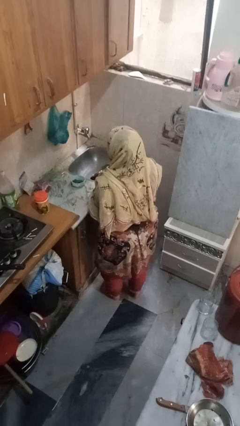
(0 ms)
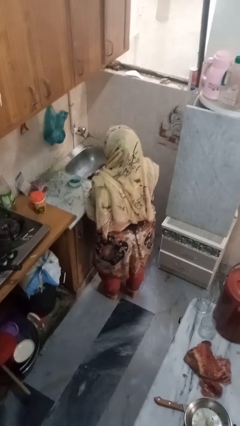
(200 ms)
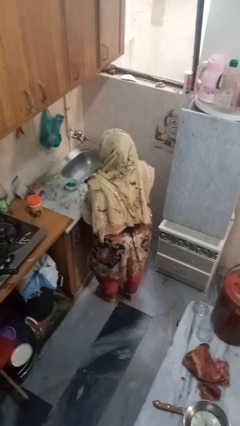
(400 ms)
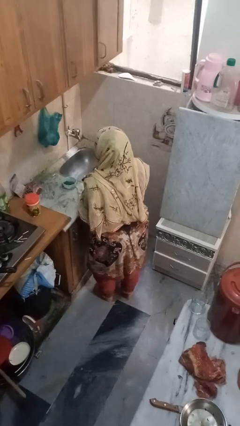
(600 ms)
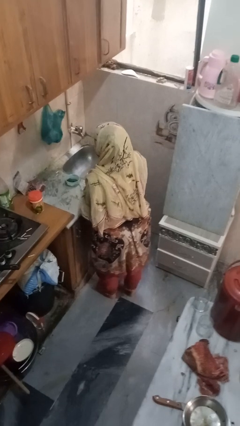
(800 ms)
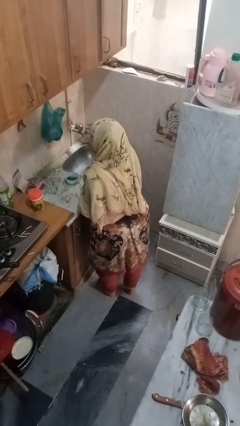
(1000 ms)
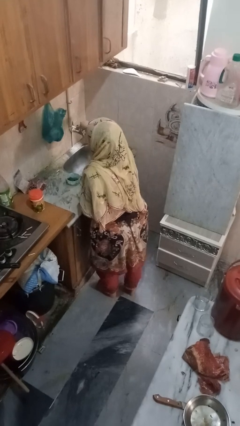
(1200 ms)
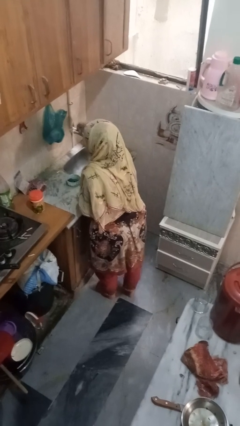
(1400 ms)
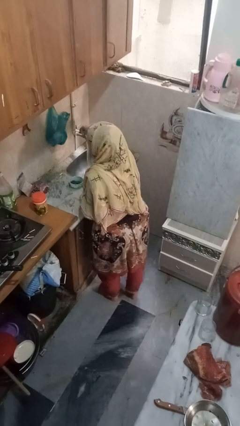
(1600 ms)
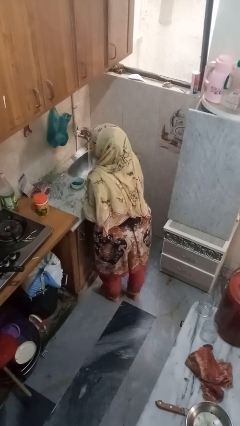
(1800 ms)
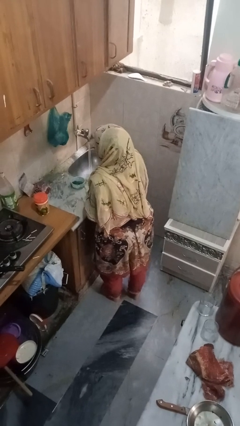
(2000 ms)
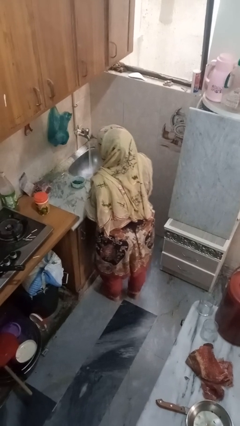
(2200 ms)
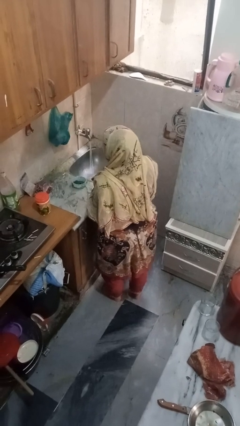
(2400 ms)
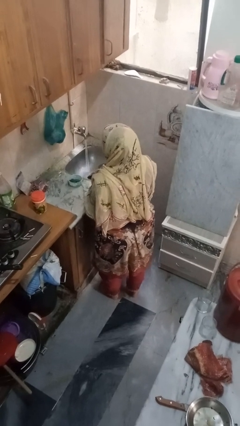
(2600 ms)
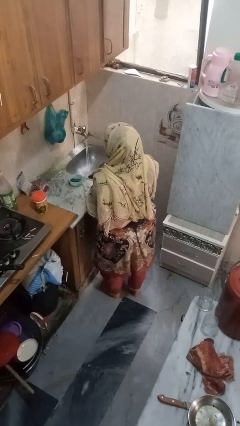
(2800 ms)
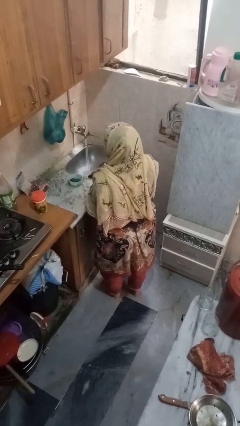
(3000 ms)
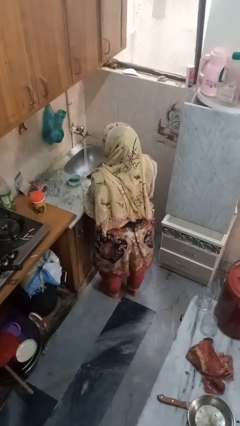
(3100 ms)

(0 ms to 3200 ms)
person turns on faucet

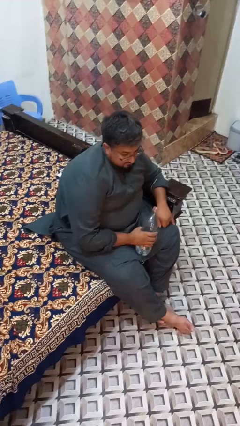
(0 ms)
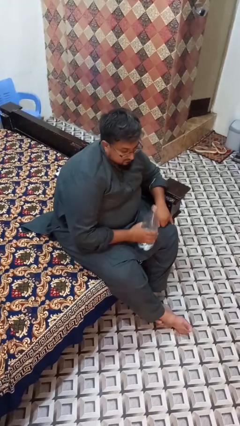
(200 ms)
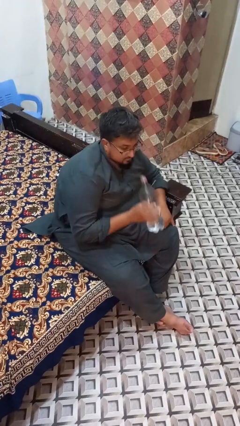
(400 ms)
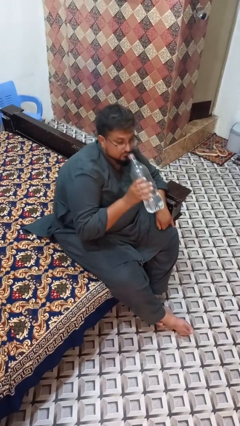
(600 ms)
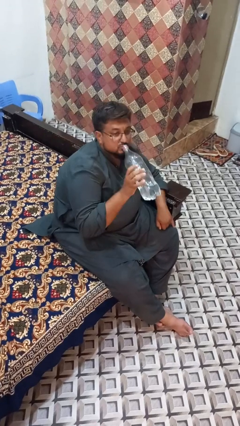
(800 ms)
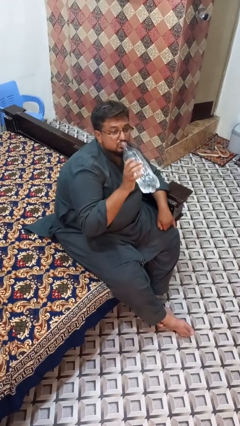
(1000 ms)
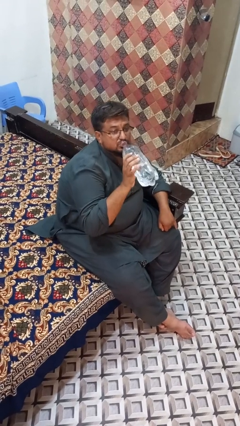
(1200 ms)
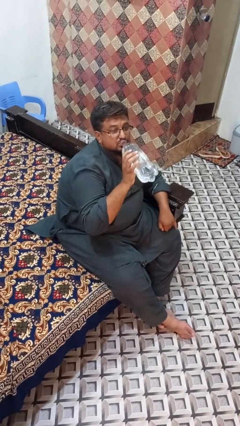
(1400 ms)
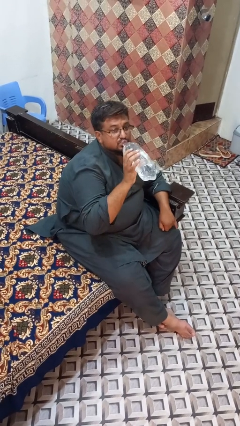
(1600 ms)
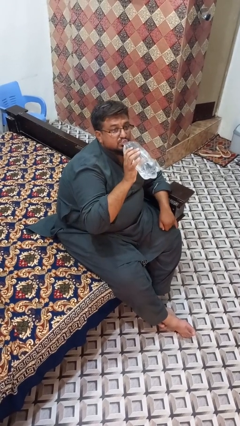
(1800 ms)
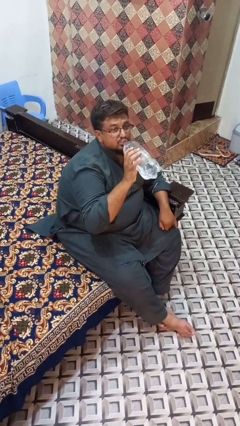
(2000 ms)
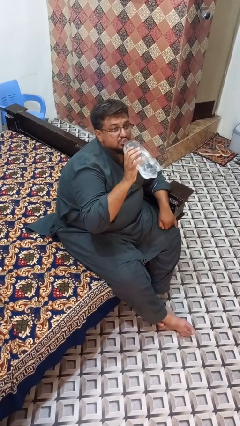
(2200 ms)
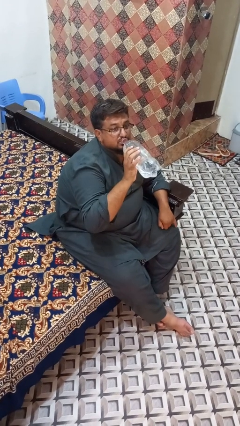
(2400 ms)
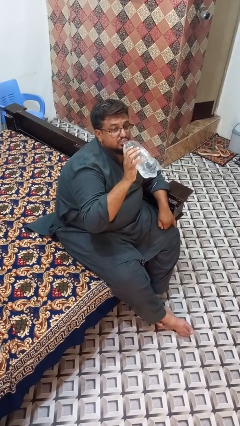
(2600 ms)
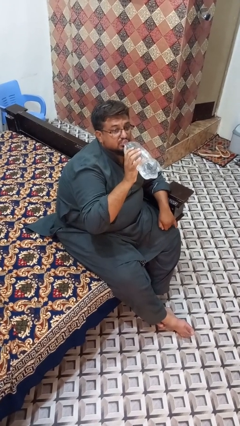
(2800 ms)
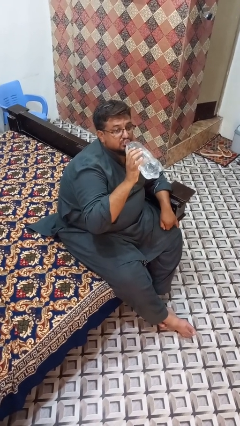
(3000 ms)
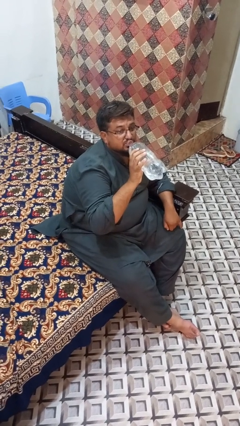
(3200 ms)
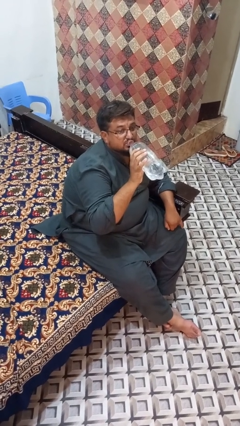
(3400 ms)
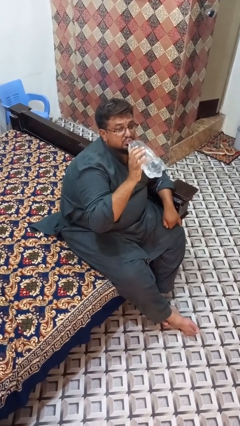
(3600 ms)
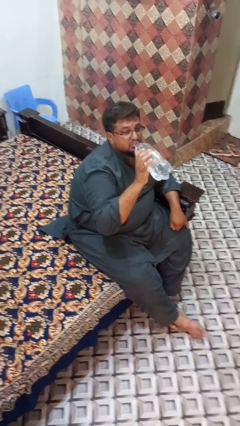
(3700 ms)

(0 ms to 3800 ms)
person drinks from bottle

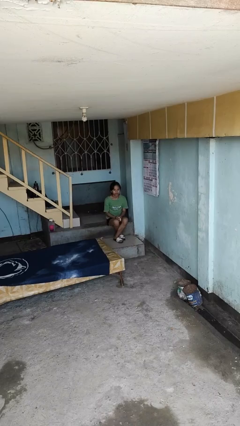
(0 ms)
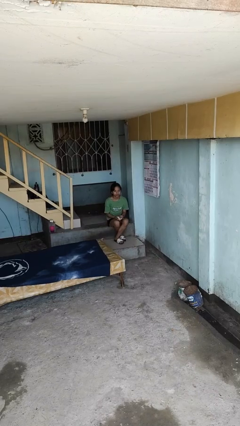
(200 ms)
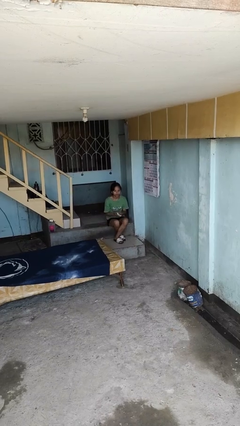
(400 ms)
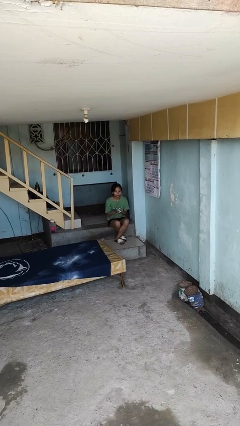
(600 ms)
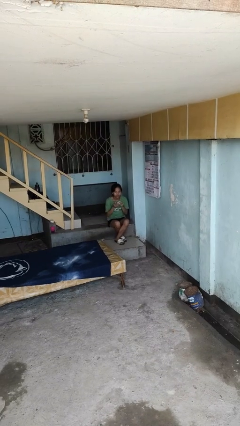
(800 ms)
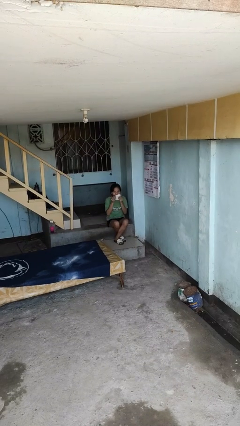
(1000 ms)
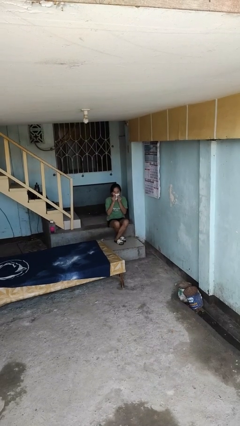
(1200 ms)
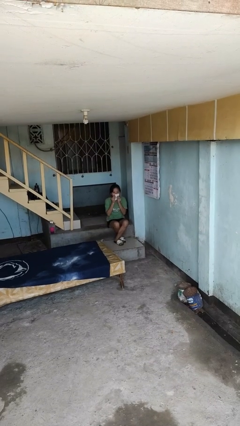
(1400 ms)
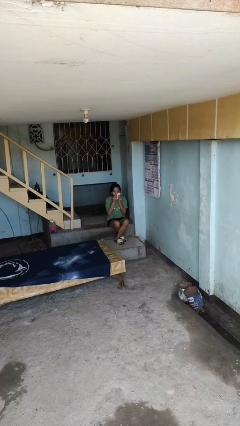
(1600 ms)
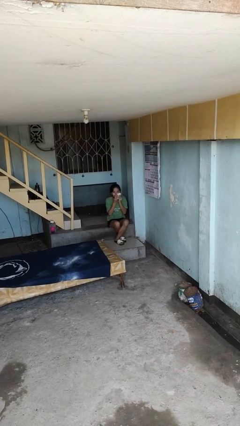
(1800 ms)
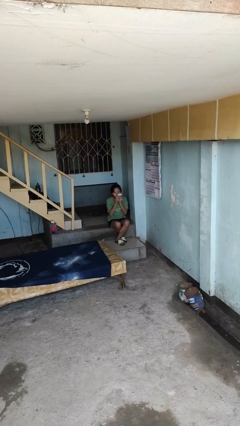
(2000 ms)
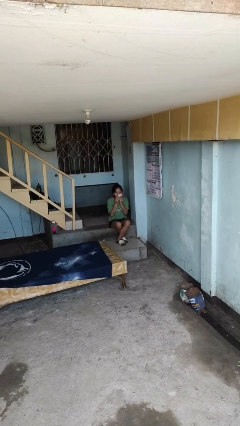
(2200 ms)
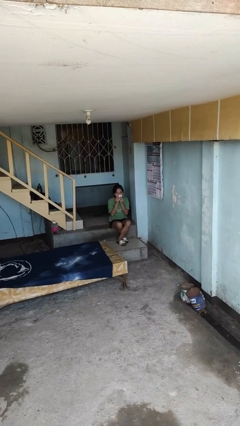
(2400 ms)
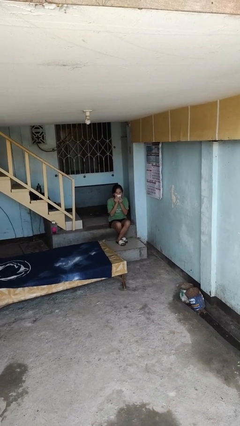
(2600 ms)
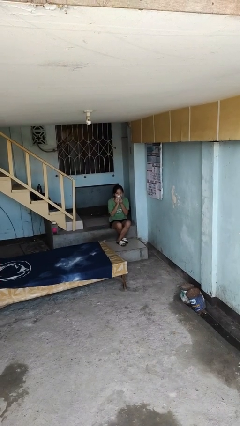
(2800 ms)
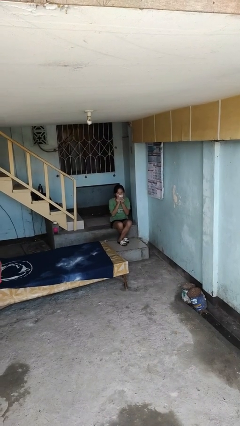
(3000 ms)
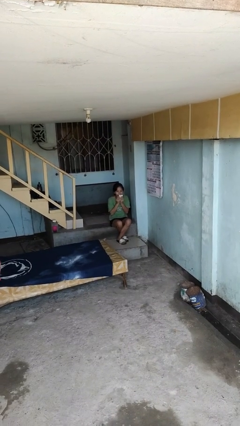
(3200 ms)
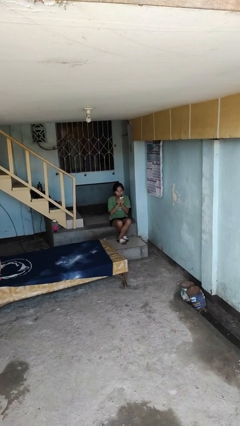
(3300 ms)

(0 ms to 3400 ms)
person wipes mouth with napkin

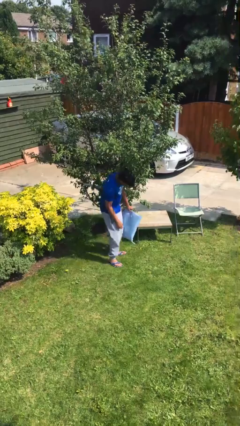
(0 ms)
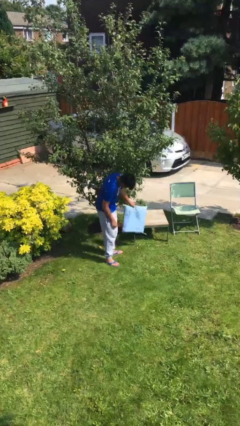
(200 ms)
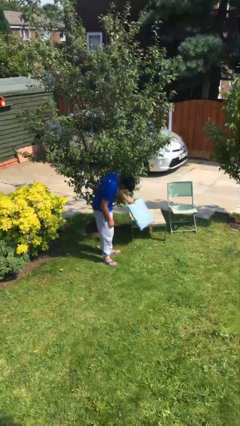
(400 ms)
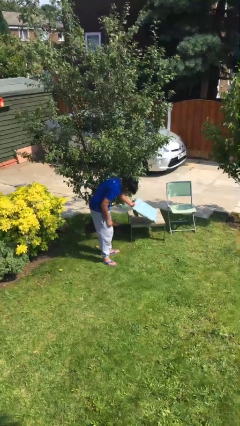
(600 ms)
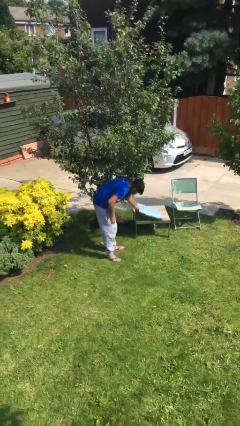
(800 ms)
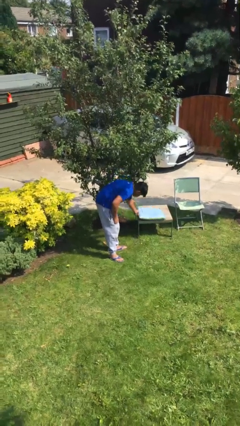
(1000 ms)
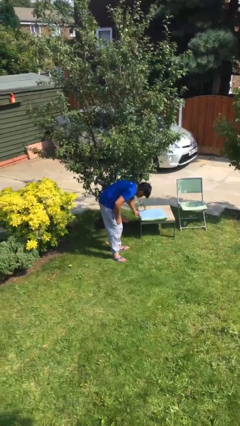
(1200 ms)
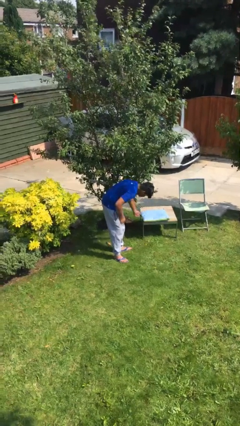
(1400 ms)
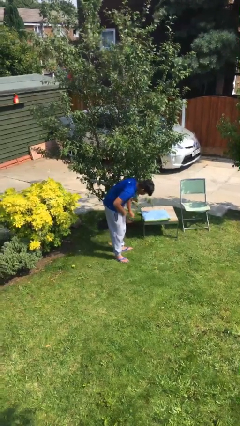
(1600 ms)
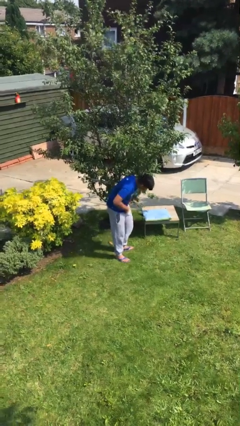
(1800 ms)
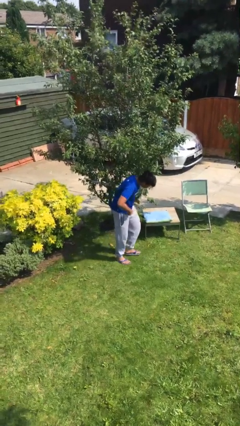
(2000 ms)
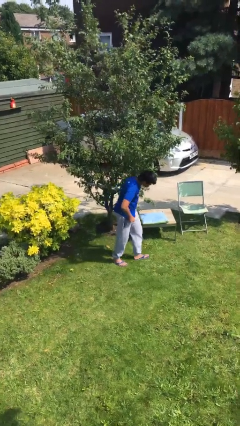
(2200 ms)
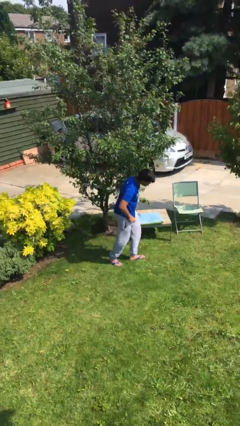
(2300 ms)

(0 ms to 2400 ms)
person puts down object on table

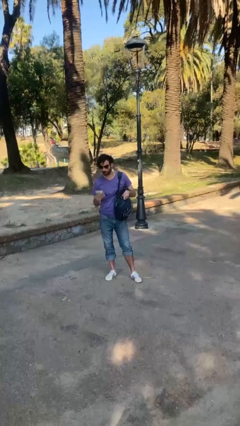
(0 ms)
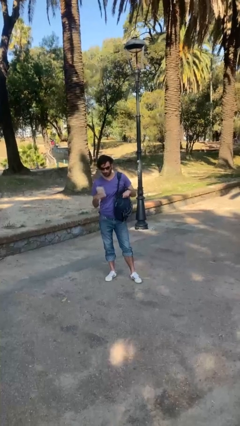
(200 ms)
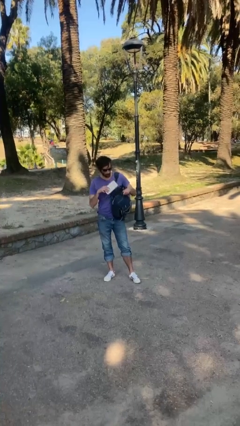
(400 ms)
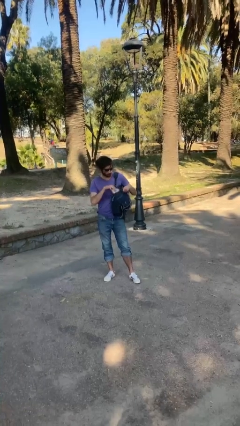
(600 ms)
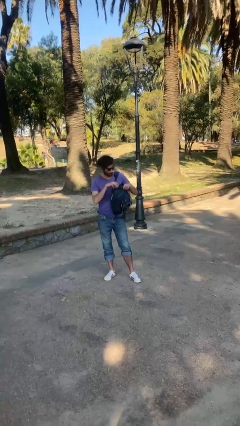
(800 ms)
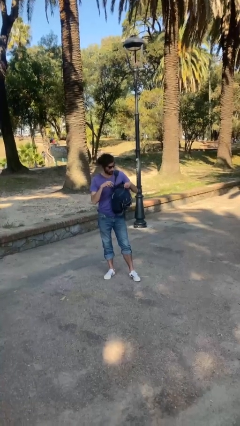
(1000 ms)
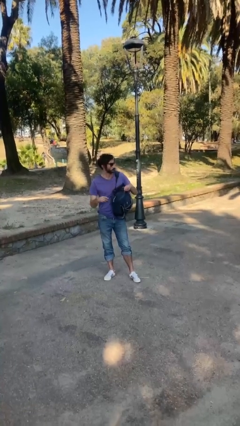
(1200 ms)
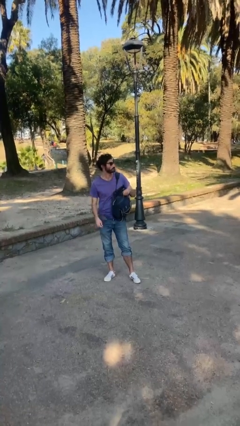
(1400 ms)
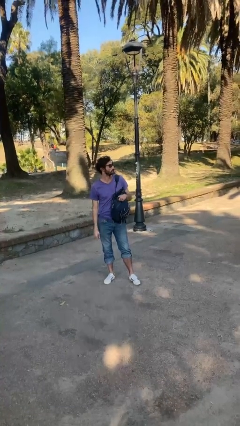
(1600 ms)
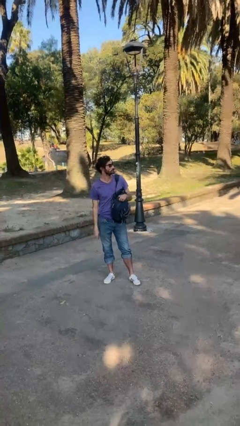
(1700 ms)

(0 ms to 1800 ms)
person puts object into backpack

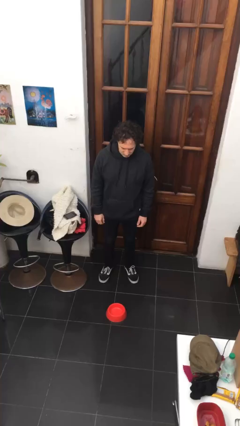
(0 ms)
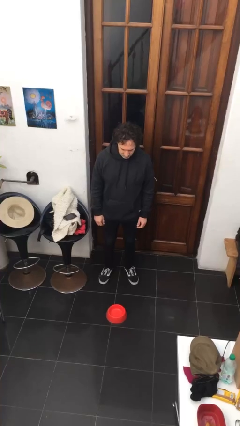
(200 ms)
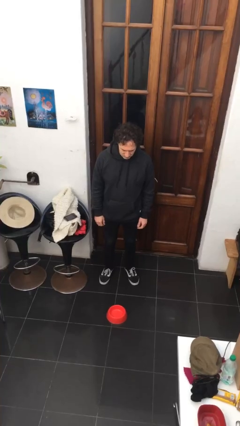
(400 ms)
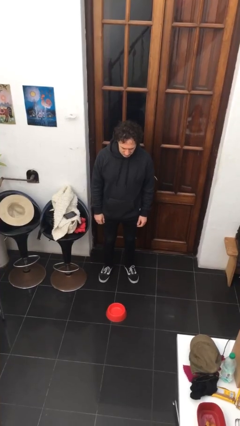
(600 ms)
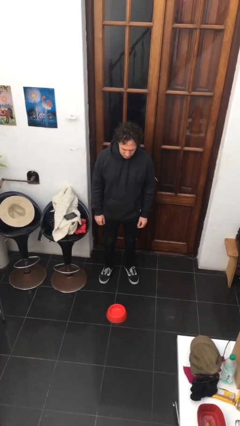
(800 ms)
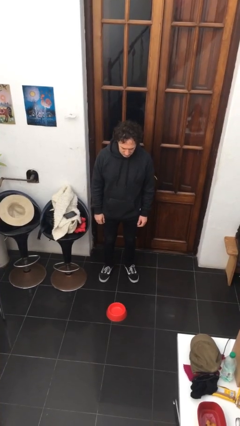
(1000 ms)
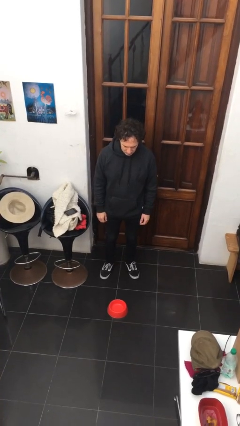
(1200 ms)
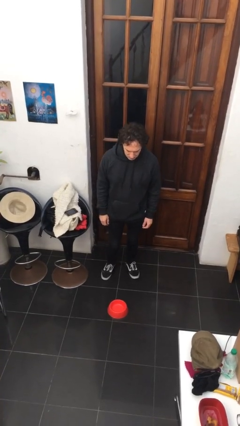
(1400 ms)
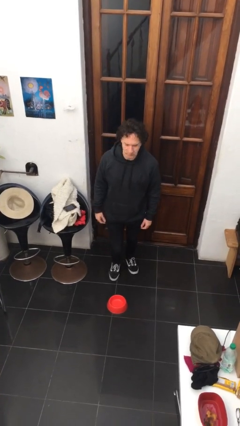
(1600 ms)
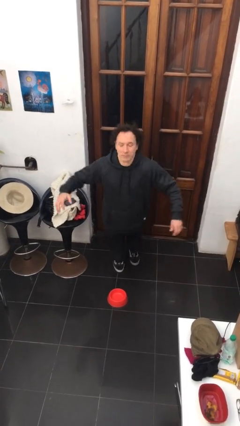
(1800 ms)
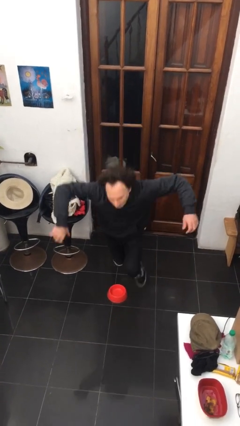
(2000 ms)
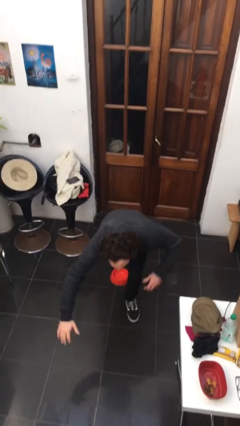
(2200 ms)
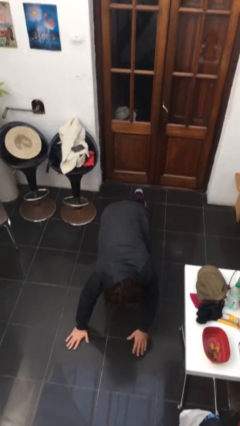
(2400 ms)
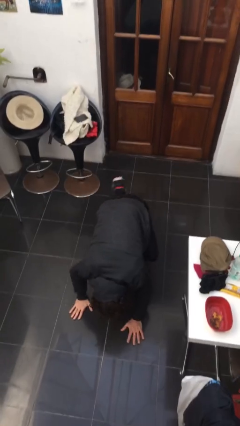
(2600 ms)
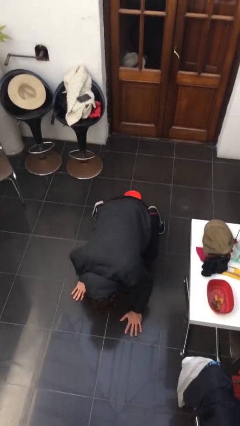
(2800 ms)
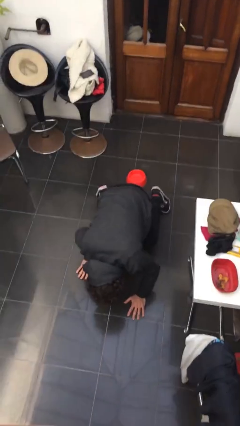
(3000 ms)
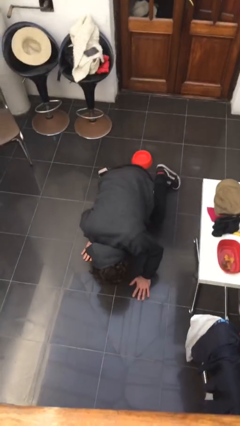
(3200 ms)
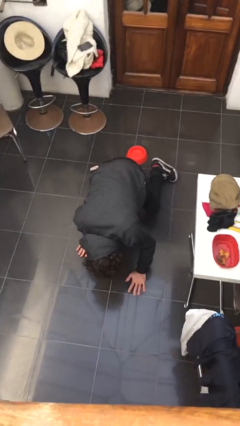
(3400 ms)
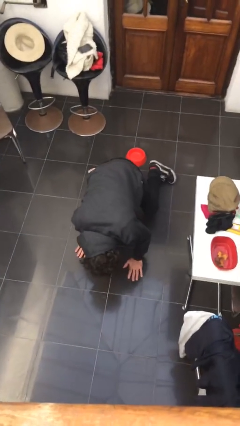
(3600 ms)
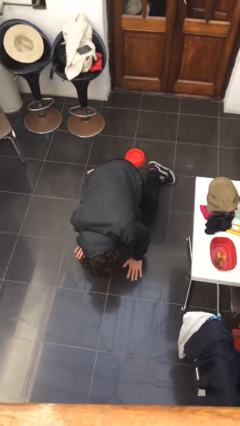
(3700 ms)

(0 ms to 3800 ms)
person trips on object on floor
